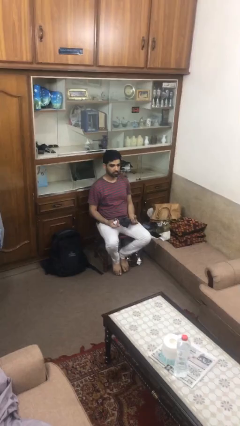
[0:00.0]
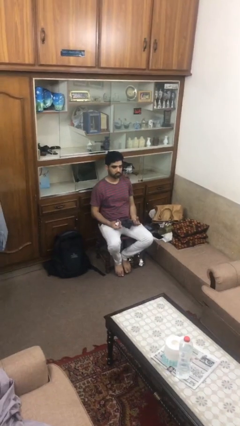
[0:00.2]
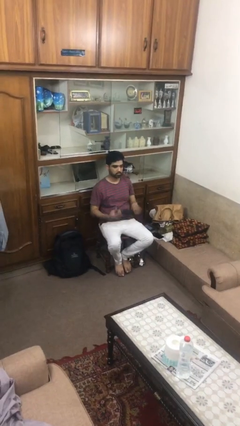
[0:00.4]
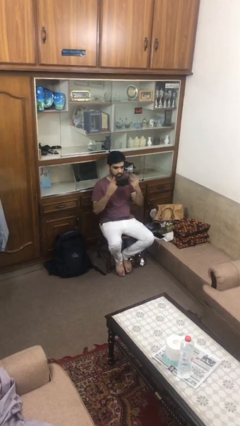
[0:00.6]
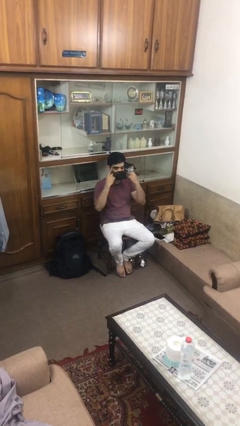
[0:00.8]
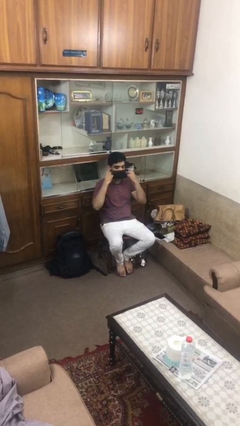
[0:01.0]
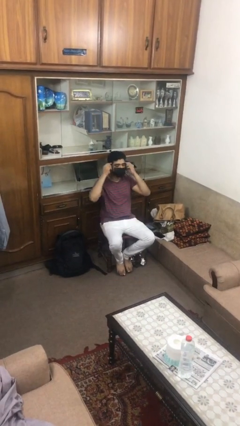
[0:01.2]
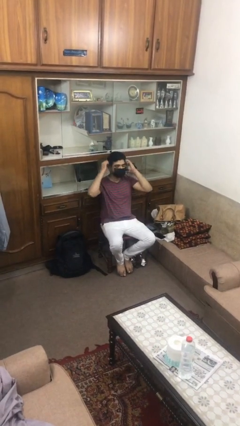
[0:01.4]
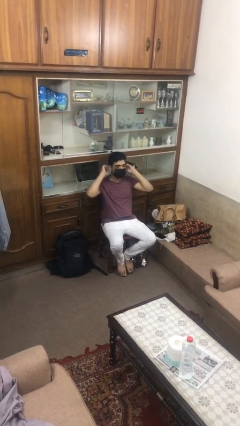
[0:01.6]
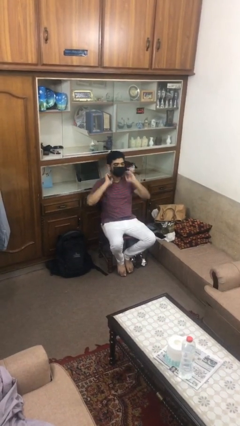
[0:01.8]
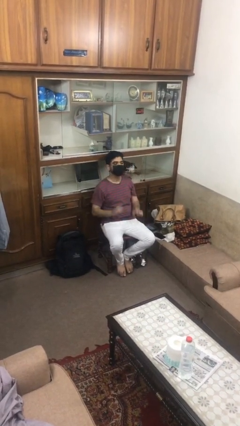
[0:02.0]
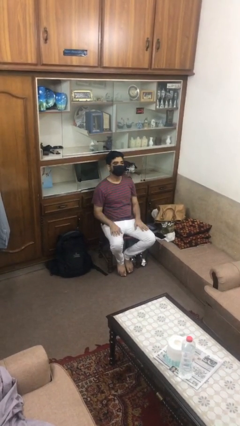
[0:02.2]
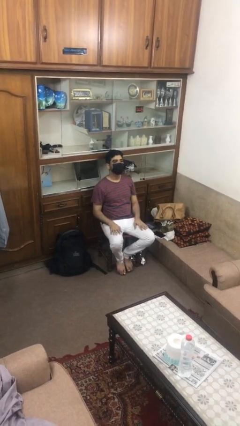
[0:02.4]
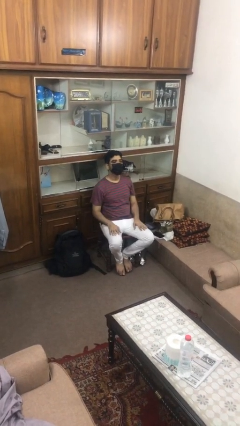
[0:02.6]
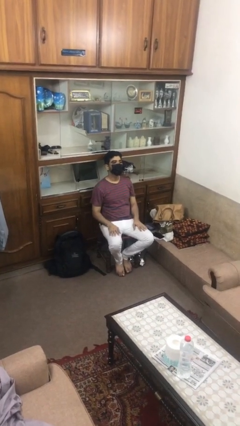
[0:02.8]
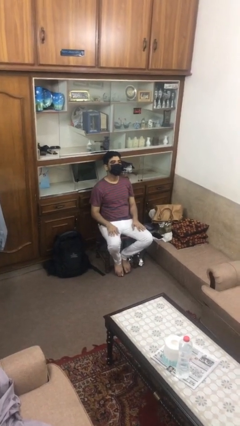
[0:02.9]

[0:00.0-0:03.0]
person puts on facemask

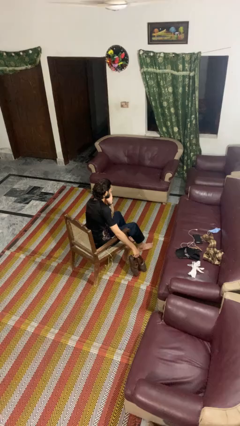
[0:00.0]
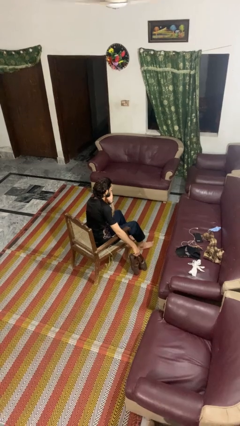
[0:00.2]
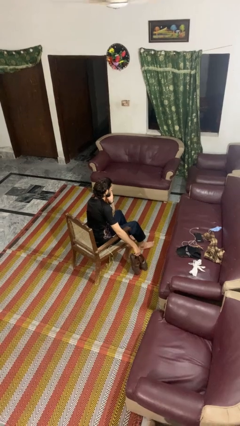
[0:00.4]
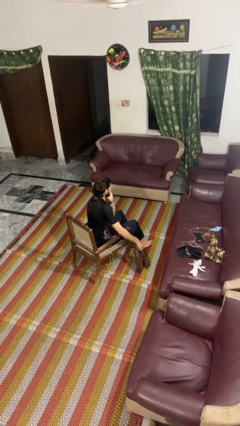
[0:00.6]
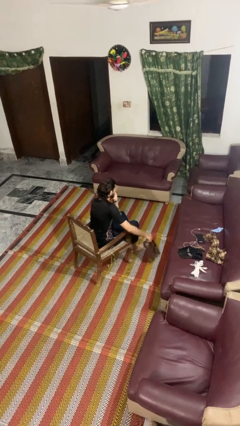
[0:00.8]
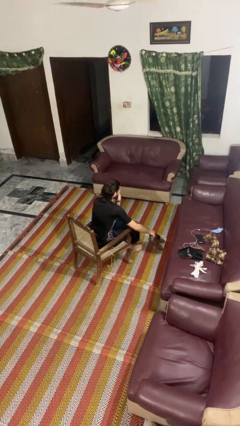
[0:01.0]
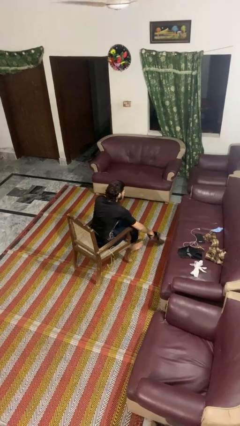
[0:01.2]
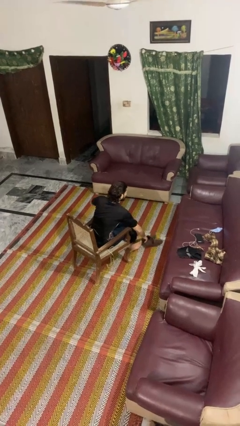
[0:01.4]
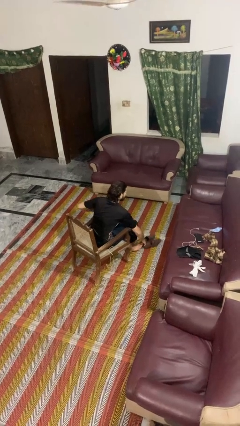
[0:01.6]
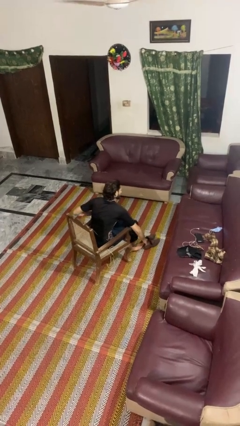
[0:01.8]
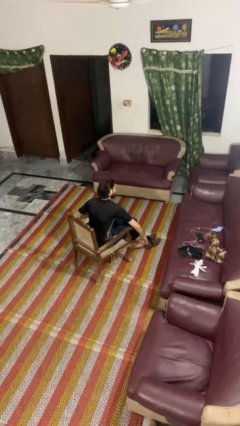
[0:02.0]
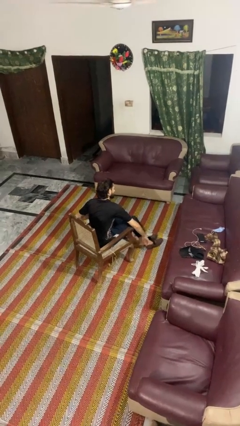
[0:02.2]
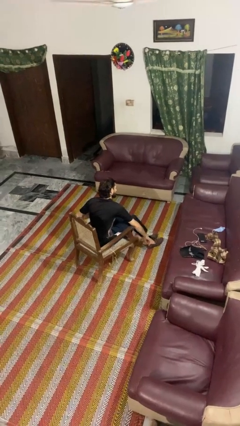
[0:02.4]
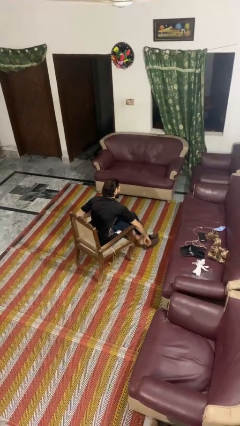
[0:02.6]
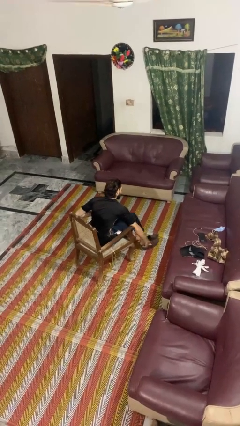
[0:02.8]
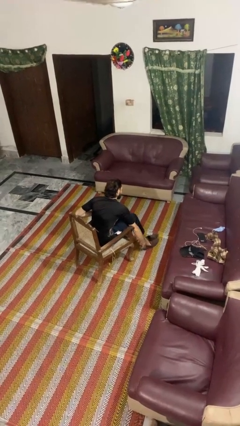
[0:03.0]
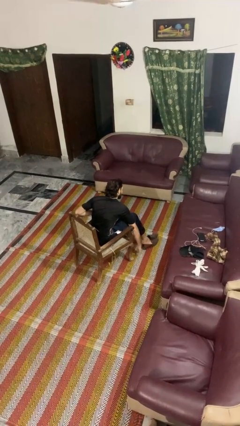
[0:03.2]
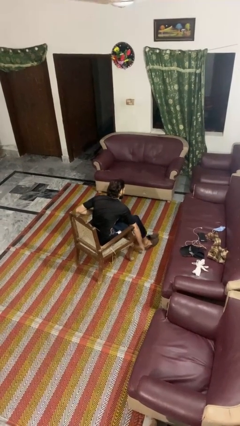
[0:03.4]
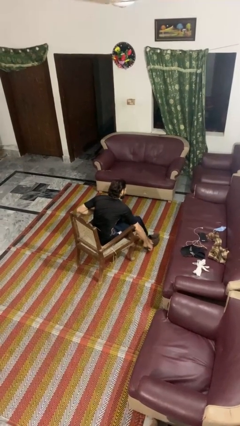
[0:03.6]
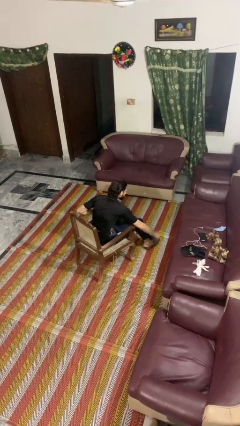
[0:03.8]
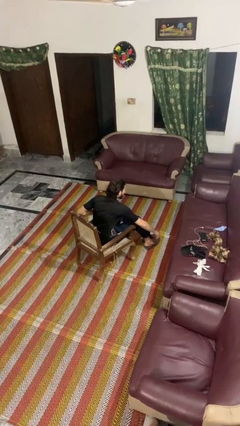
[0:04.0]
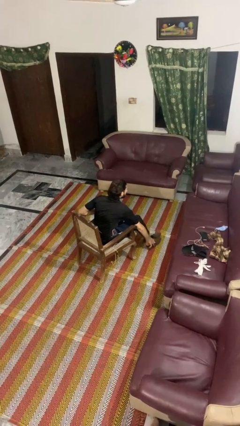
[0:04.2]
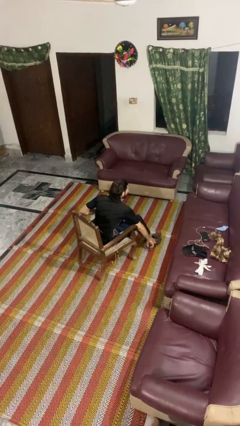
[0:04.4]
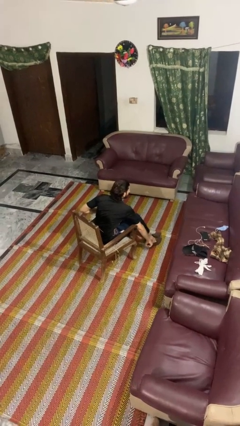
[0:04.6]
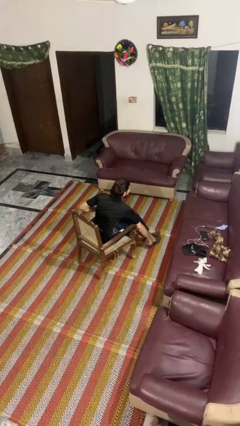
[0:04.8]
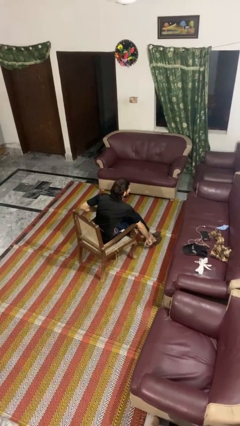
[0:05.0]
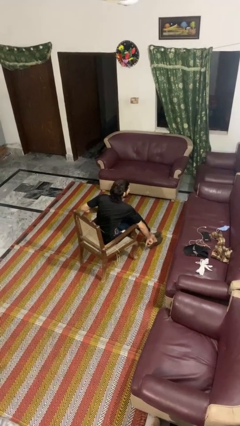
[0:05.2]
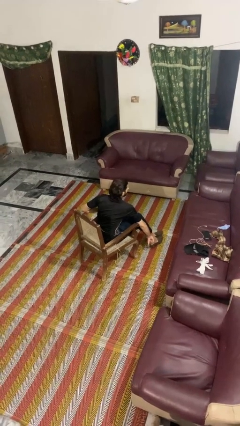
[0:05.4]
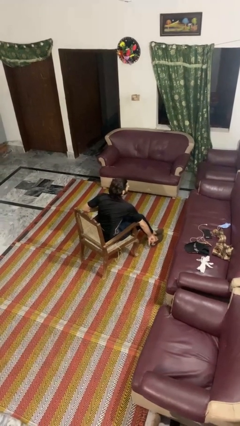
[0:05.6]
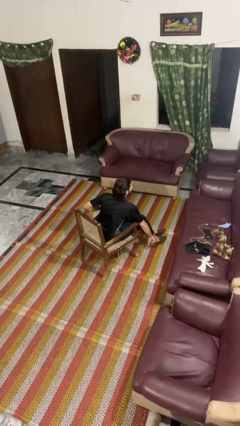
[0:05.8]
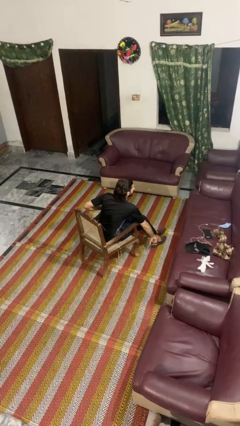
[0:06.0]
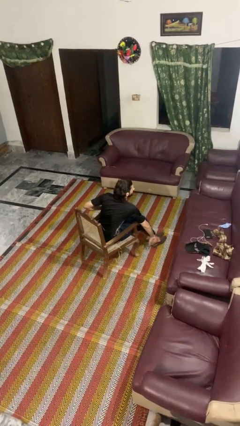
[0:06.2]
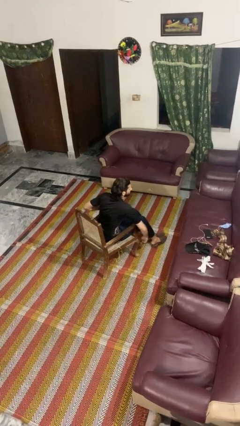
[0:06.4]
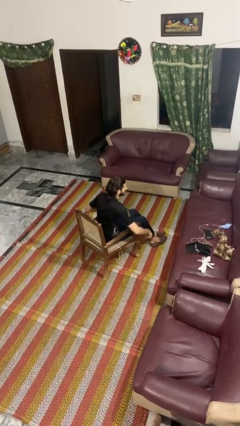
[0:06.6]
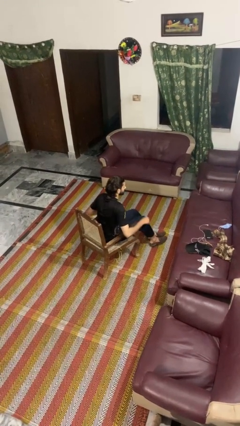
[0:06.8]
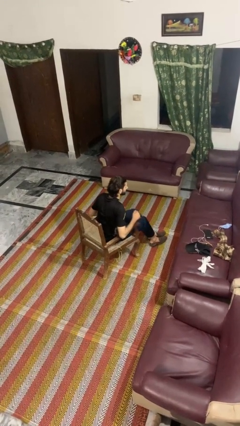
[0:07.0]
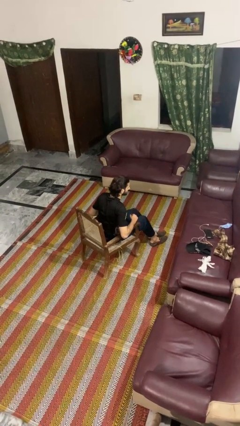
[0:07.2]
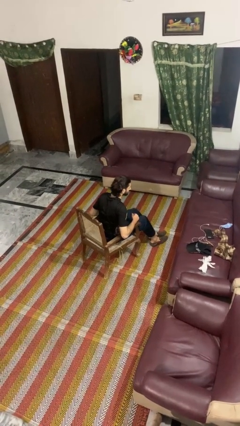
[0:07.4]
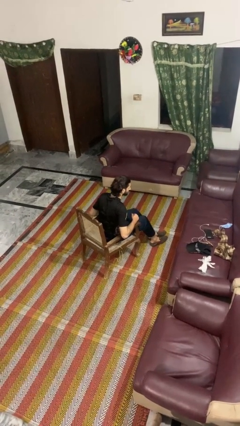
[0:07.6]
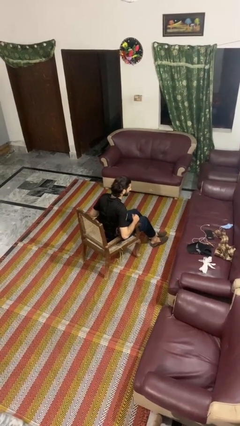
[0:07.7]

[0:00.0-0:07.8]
person puts on shoes

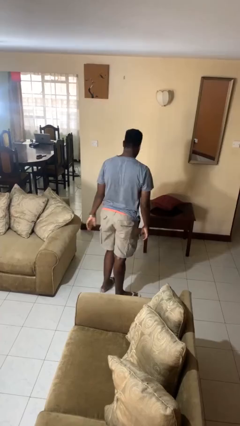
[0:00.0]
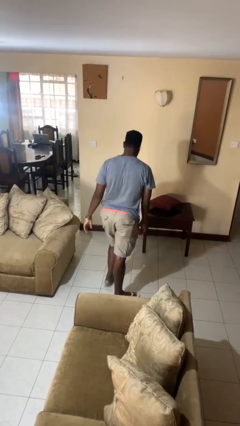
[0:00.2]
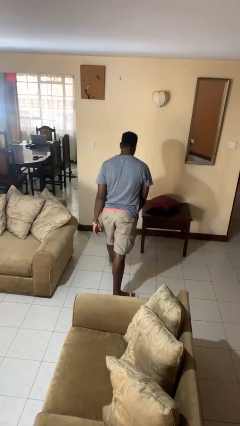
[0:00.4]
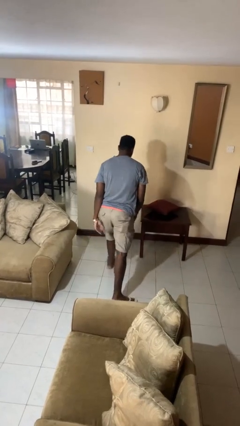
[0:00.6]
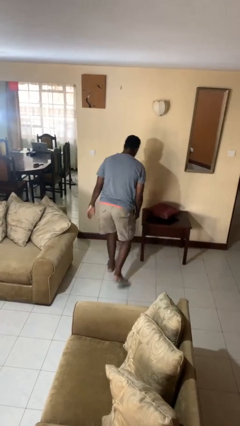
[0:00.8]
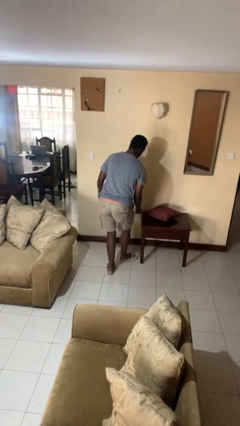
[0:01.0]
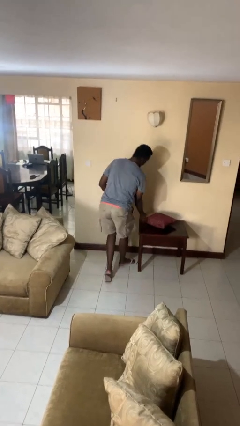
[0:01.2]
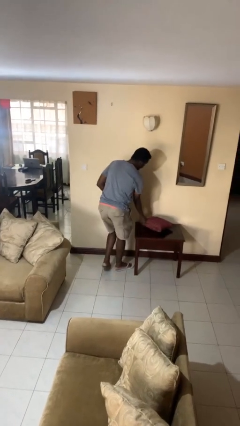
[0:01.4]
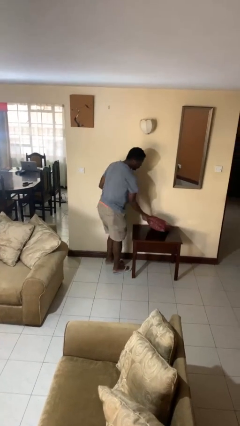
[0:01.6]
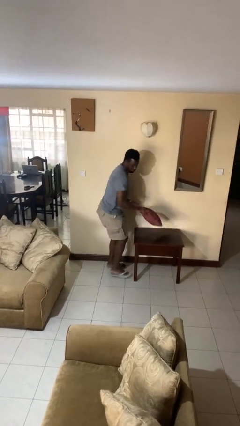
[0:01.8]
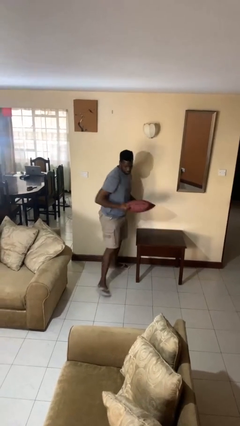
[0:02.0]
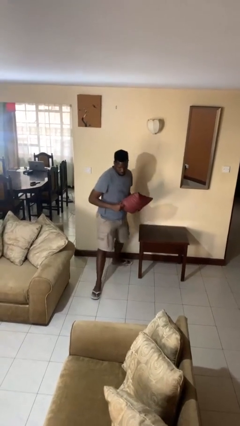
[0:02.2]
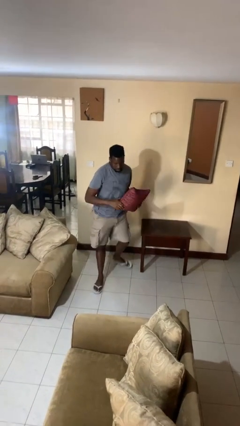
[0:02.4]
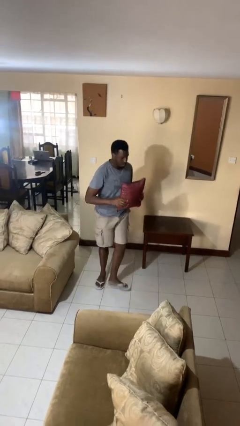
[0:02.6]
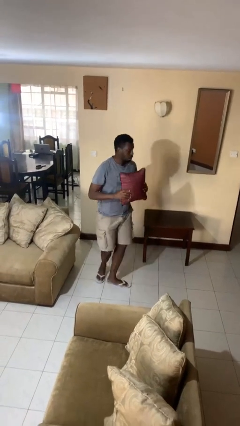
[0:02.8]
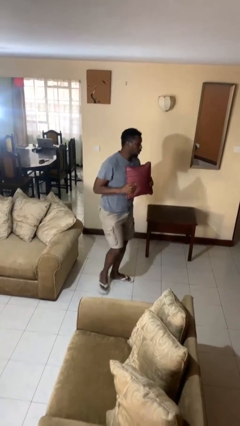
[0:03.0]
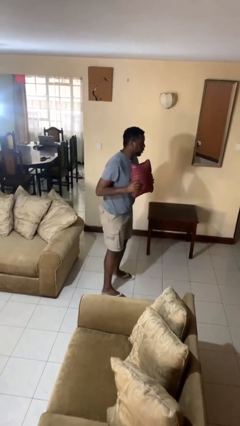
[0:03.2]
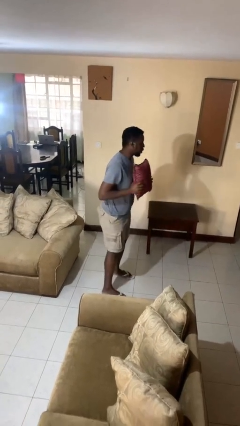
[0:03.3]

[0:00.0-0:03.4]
person picks up object from table

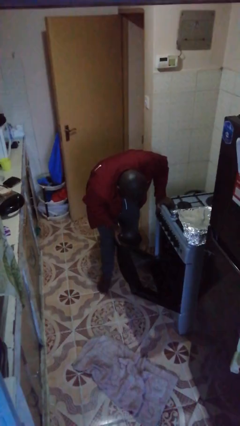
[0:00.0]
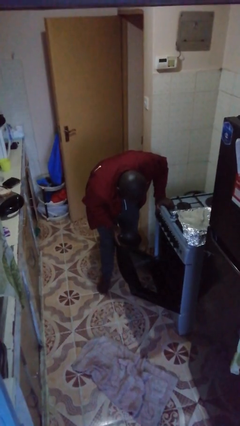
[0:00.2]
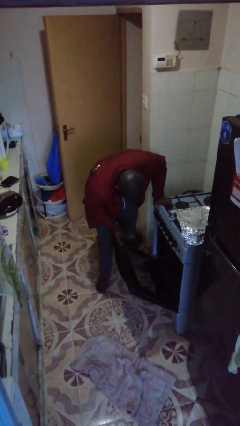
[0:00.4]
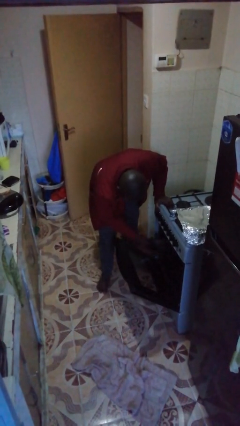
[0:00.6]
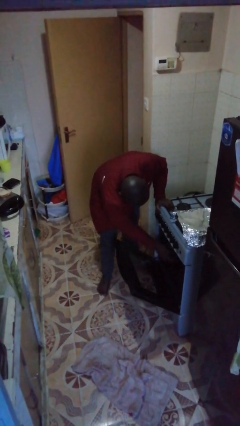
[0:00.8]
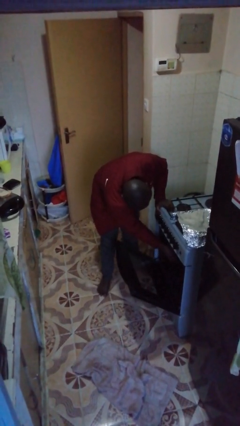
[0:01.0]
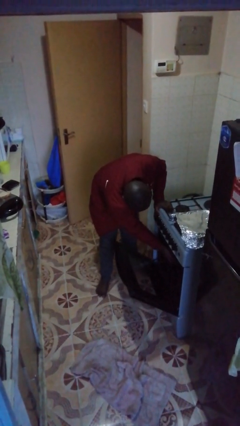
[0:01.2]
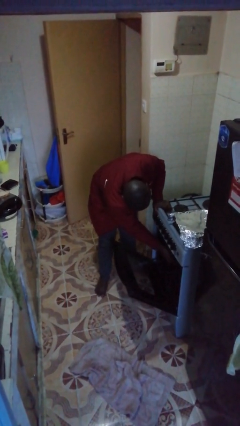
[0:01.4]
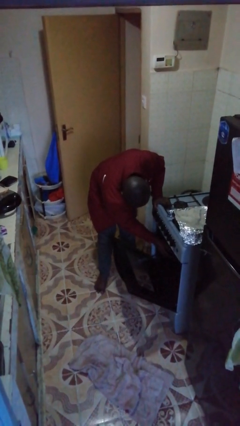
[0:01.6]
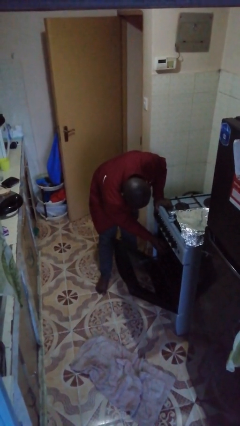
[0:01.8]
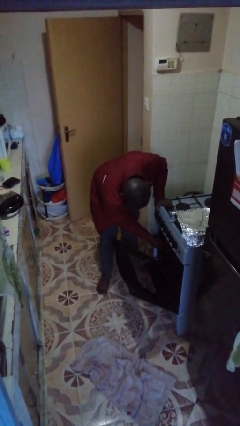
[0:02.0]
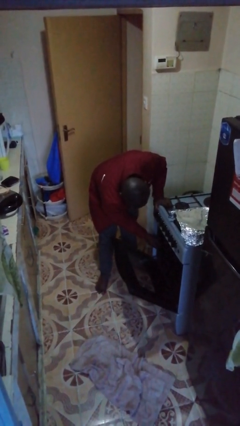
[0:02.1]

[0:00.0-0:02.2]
person puts object into oven

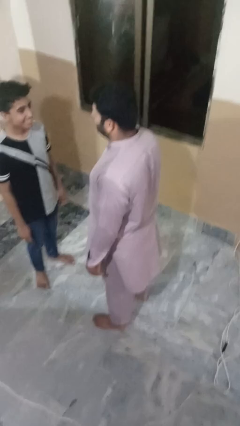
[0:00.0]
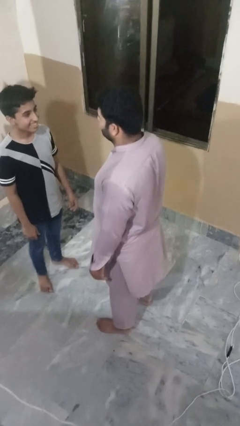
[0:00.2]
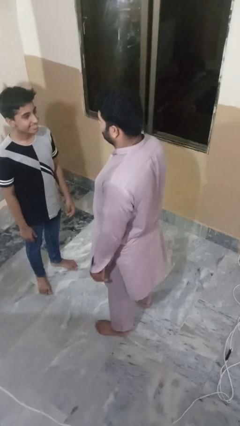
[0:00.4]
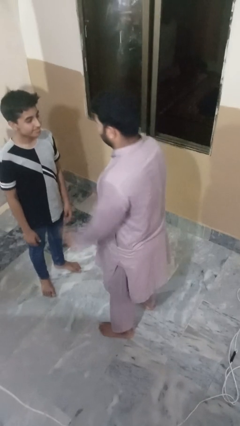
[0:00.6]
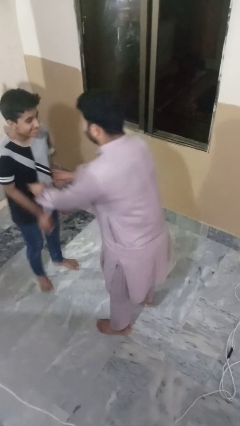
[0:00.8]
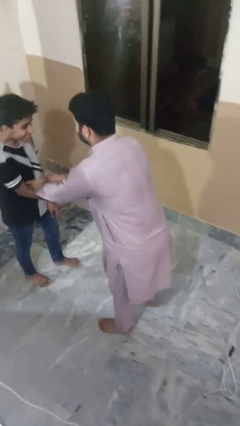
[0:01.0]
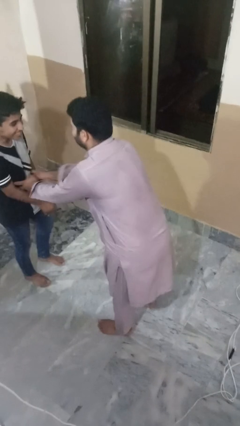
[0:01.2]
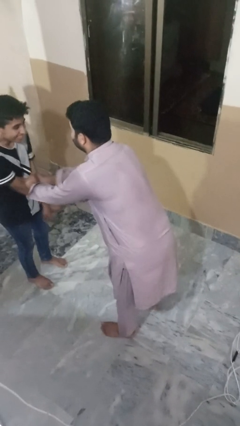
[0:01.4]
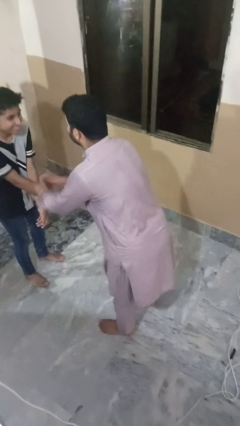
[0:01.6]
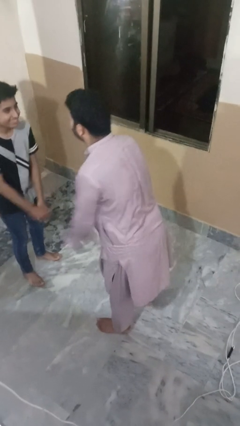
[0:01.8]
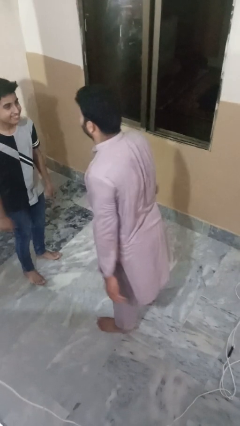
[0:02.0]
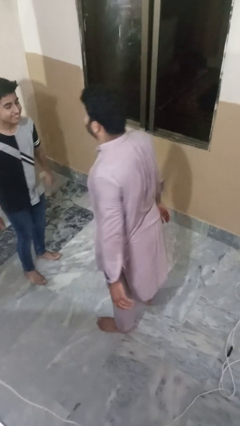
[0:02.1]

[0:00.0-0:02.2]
person tickles person
